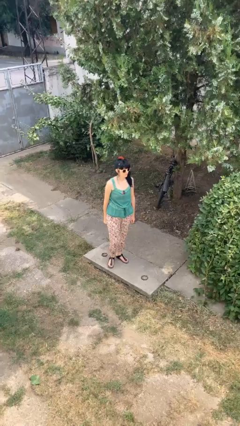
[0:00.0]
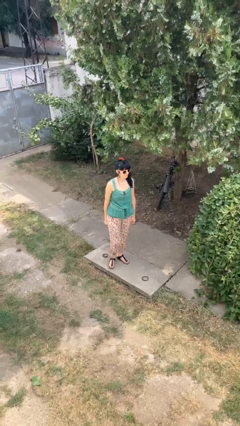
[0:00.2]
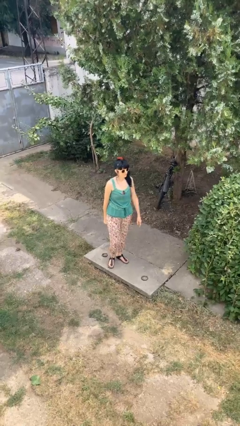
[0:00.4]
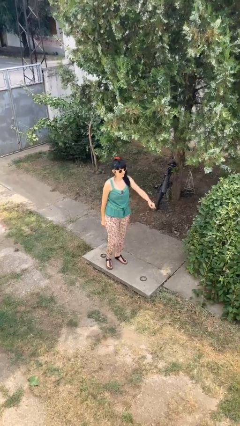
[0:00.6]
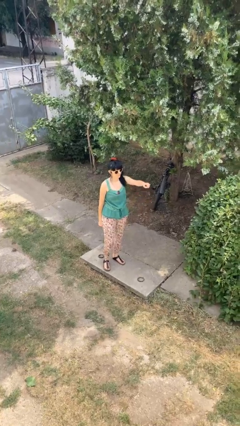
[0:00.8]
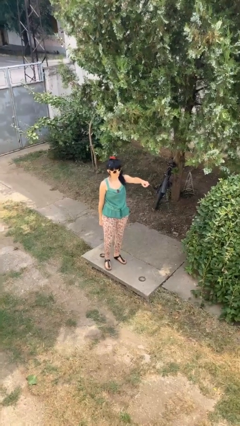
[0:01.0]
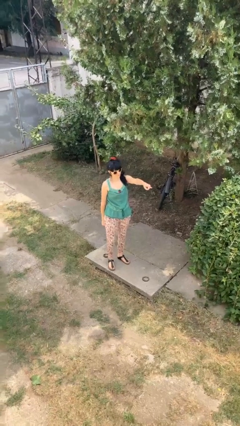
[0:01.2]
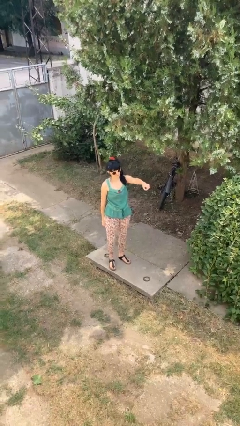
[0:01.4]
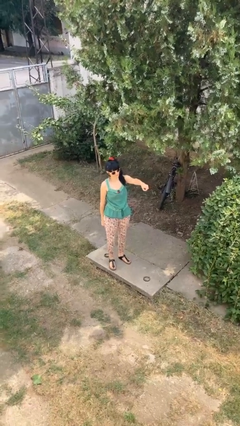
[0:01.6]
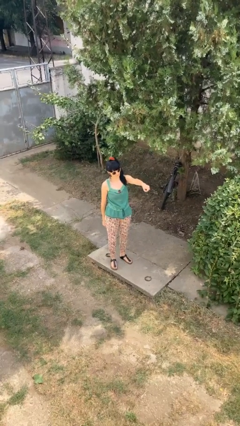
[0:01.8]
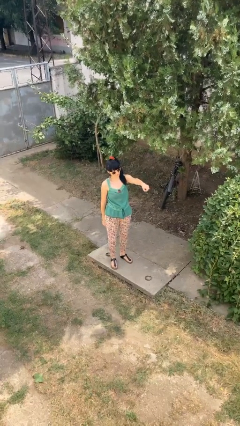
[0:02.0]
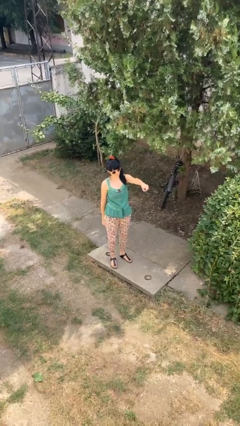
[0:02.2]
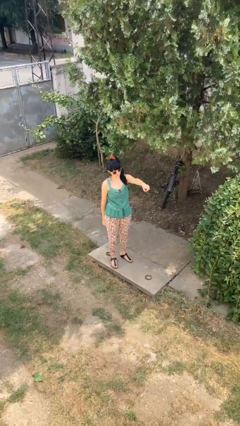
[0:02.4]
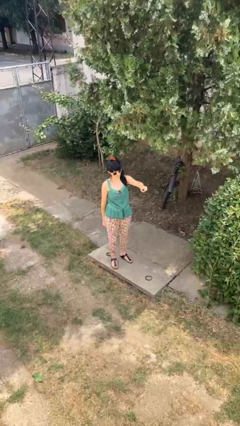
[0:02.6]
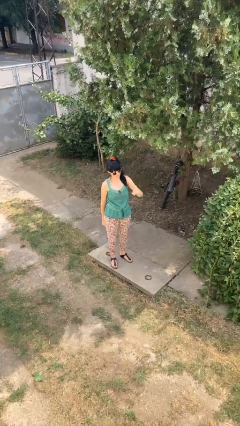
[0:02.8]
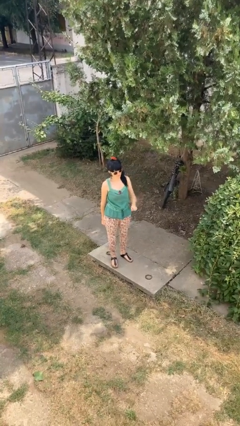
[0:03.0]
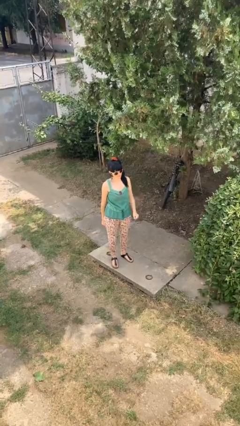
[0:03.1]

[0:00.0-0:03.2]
person points at person

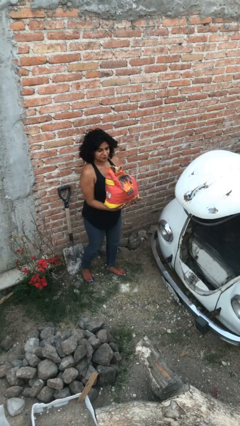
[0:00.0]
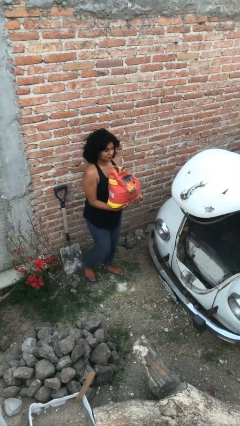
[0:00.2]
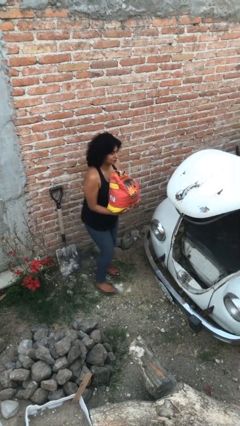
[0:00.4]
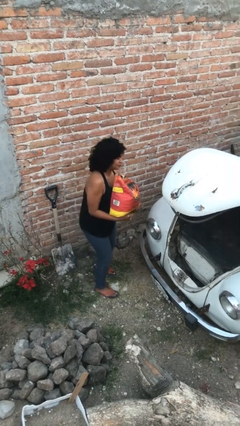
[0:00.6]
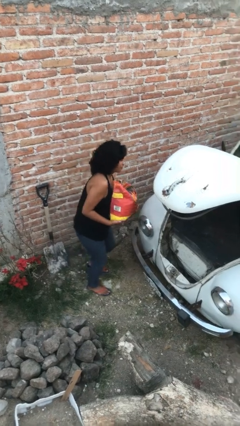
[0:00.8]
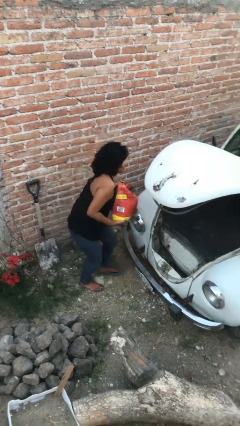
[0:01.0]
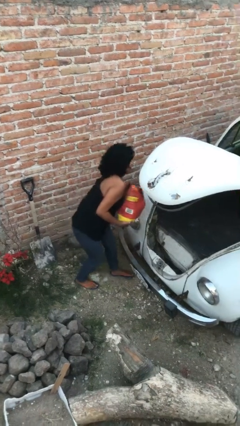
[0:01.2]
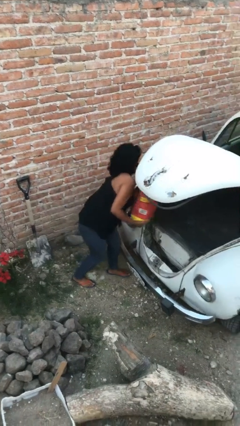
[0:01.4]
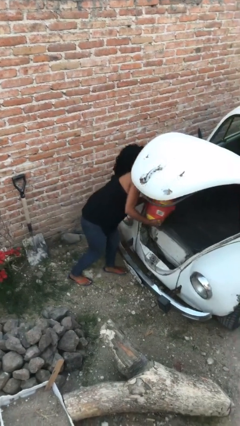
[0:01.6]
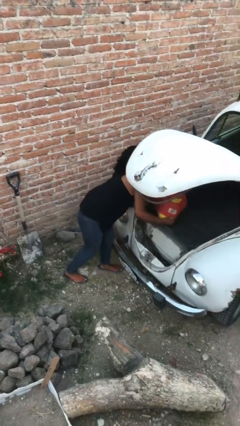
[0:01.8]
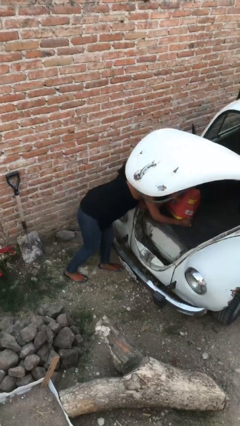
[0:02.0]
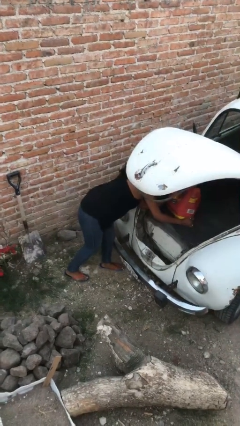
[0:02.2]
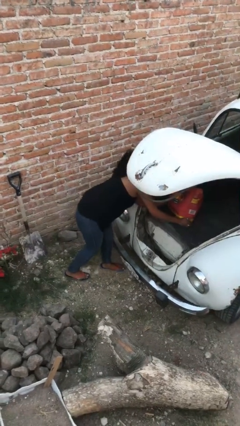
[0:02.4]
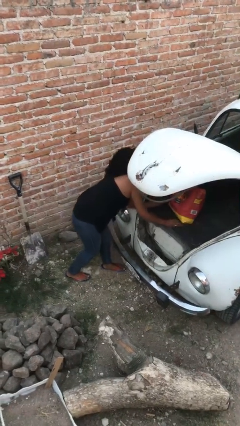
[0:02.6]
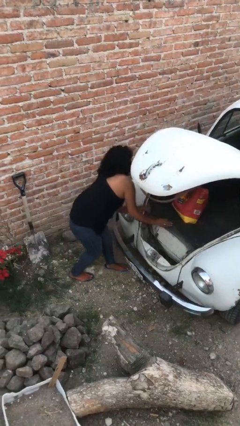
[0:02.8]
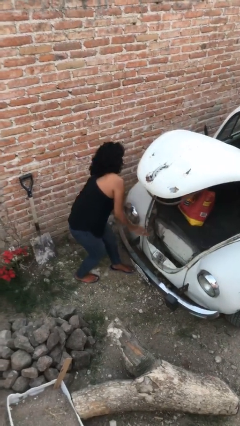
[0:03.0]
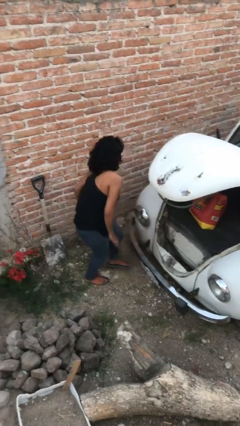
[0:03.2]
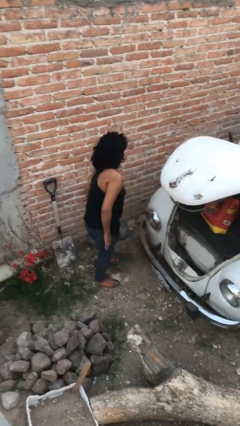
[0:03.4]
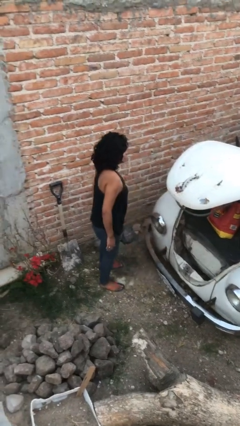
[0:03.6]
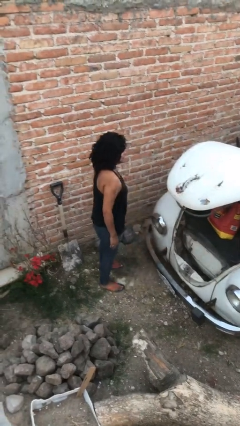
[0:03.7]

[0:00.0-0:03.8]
person loads car

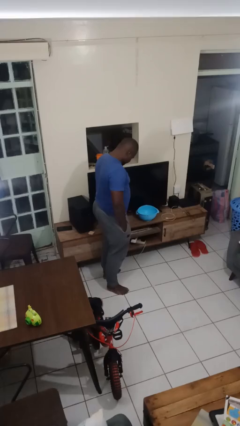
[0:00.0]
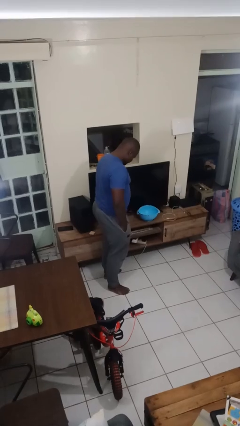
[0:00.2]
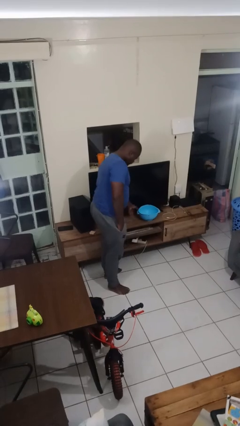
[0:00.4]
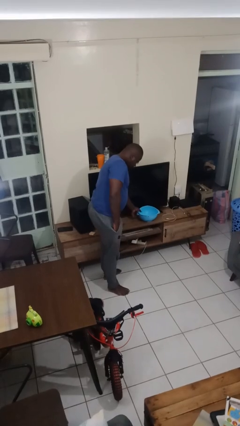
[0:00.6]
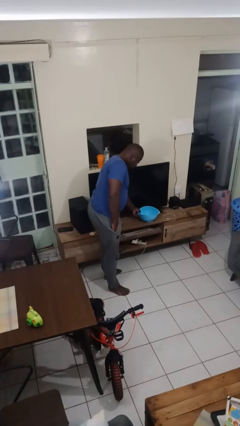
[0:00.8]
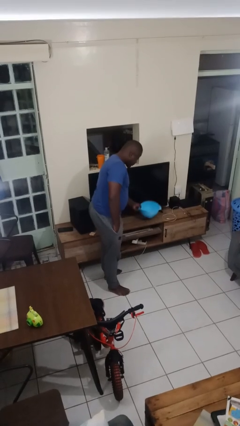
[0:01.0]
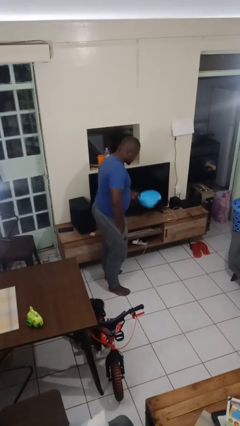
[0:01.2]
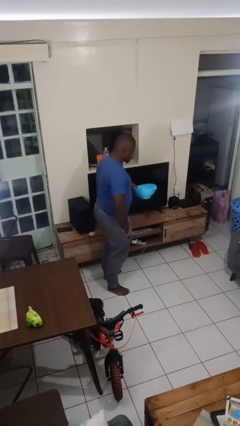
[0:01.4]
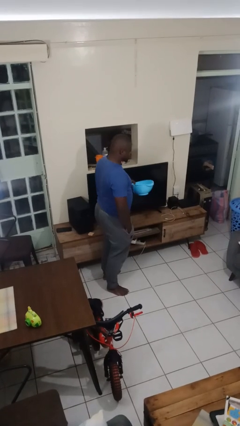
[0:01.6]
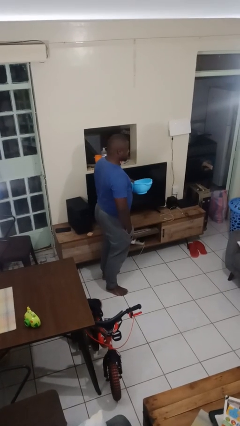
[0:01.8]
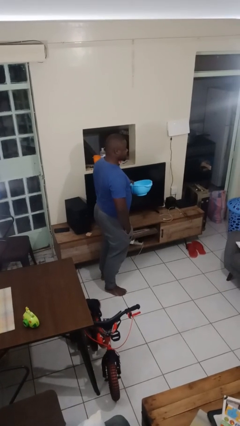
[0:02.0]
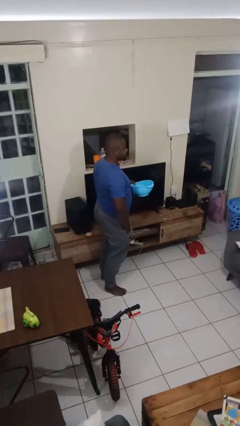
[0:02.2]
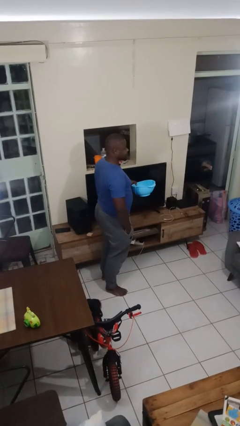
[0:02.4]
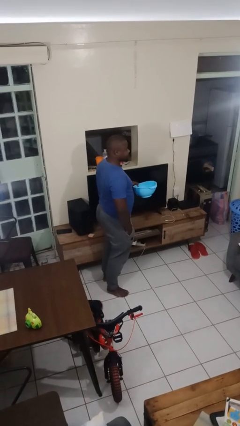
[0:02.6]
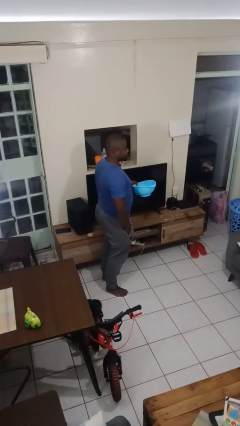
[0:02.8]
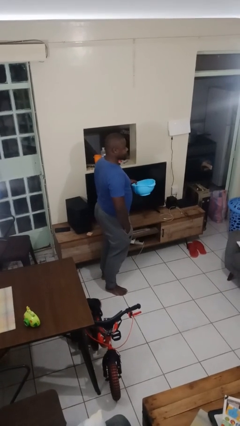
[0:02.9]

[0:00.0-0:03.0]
person picks up object from countertop

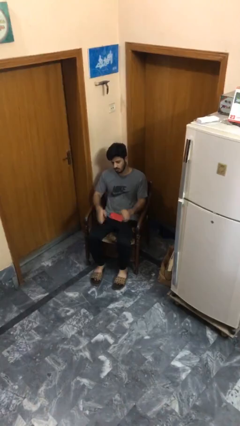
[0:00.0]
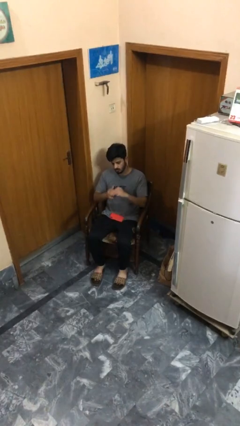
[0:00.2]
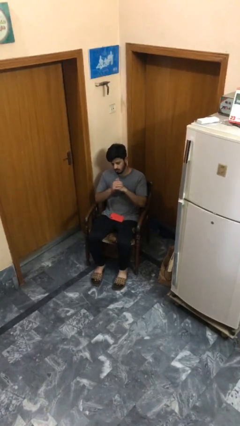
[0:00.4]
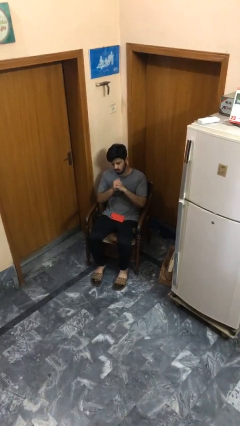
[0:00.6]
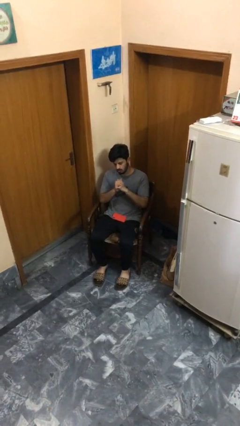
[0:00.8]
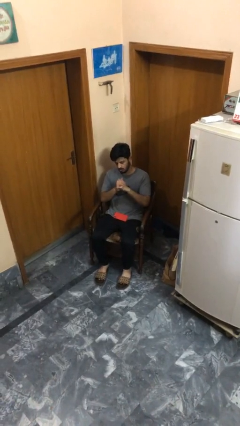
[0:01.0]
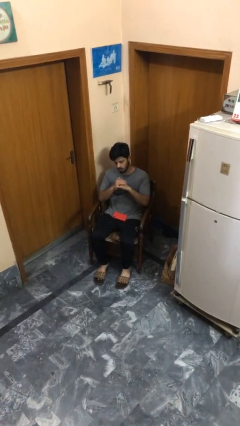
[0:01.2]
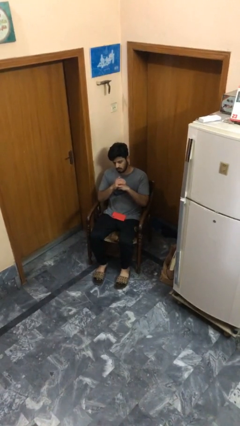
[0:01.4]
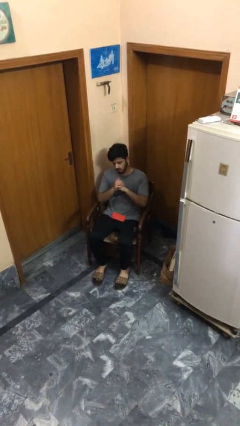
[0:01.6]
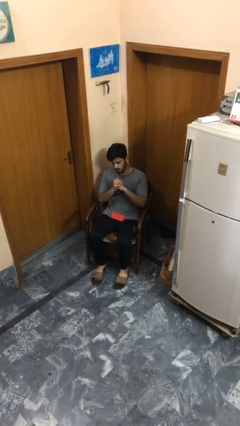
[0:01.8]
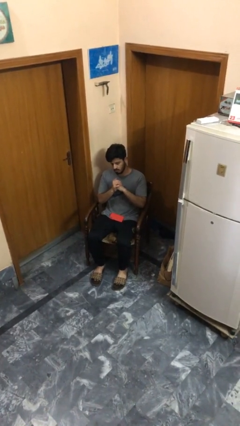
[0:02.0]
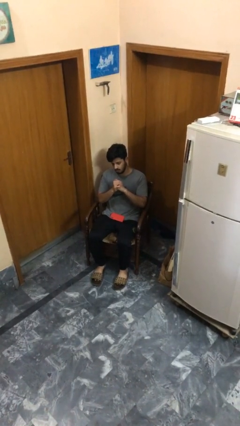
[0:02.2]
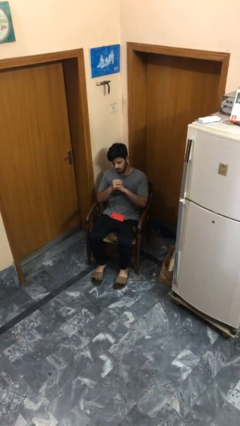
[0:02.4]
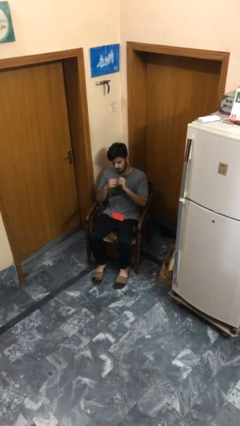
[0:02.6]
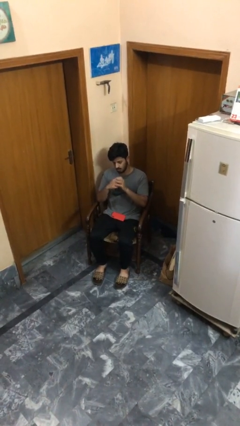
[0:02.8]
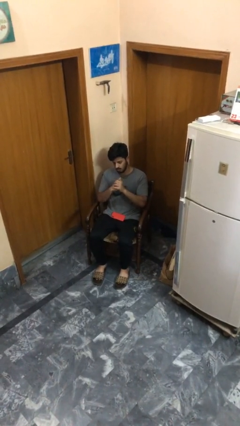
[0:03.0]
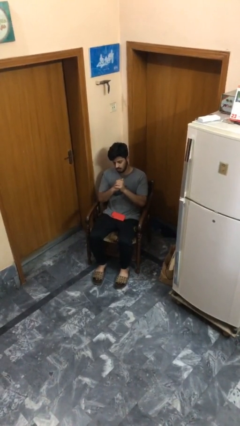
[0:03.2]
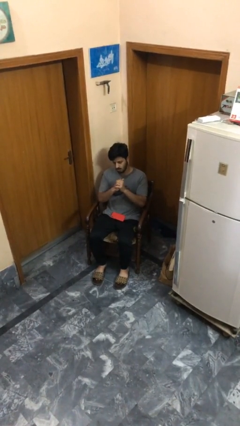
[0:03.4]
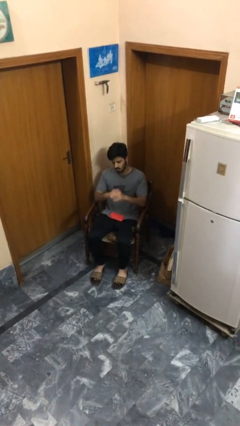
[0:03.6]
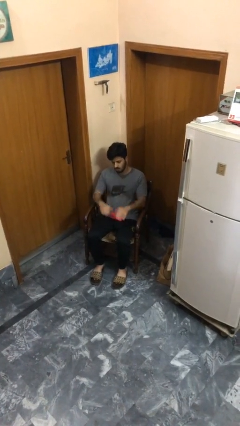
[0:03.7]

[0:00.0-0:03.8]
person cracks knuckles

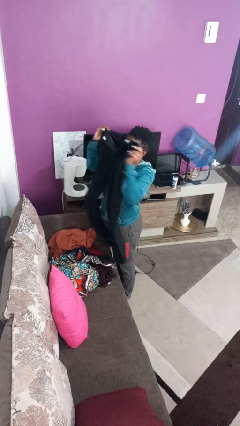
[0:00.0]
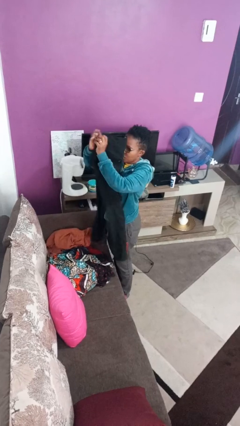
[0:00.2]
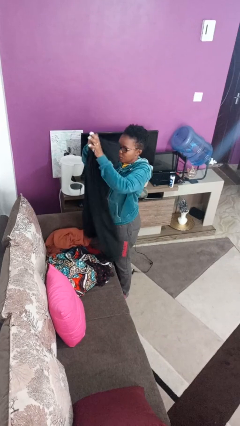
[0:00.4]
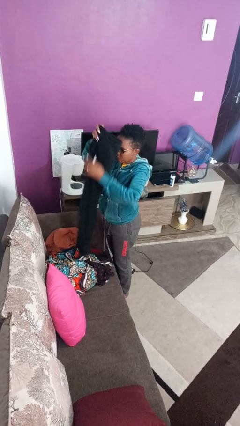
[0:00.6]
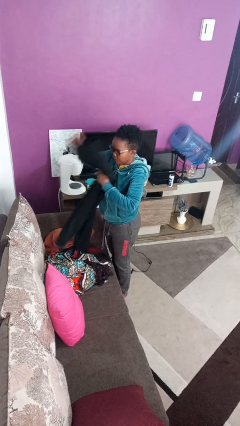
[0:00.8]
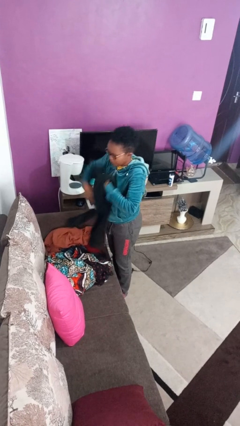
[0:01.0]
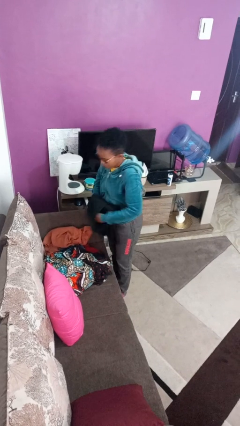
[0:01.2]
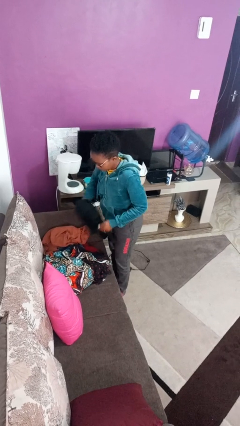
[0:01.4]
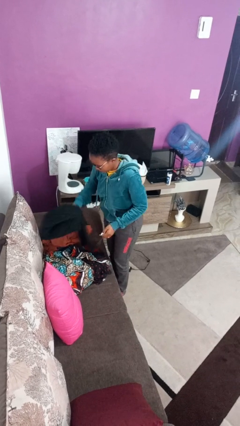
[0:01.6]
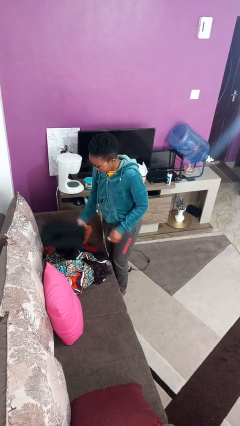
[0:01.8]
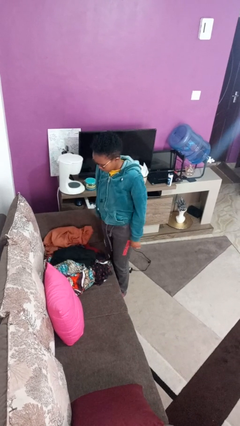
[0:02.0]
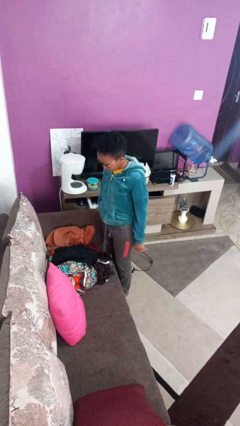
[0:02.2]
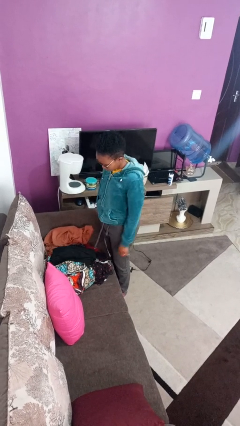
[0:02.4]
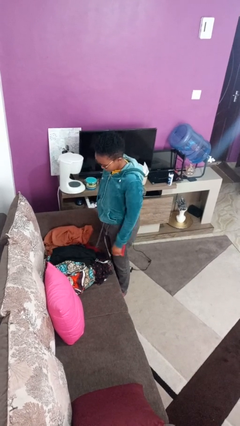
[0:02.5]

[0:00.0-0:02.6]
person folds pants

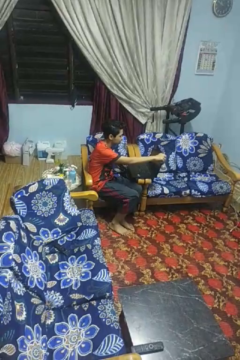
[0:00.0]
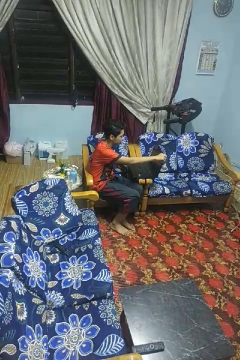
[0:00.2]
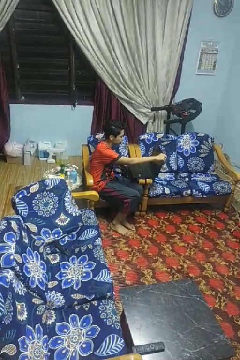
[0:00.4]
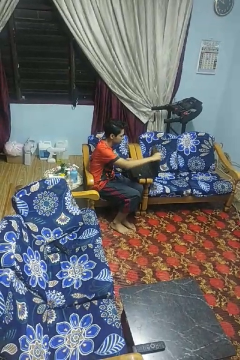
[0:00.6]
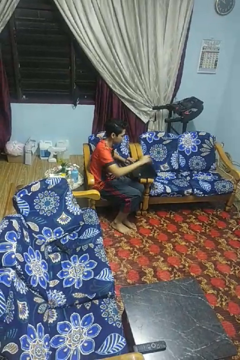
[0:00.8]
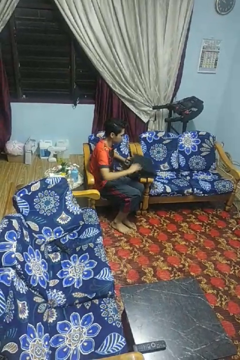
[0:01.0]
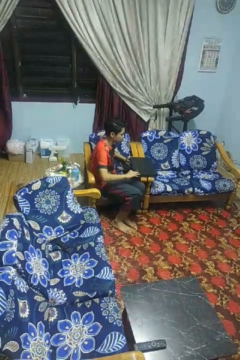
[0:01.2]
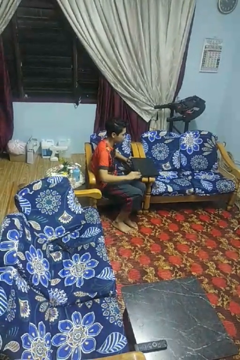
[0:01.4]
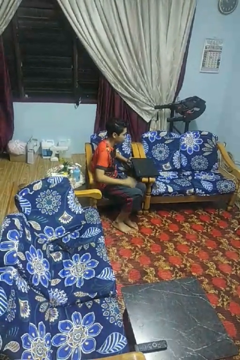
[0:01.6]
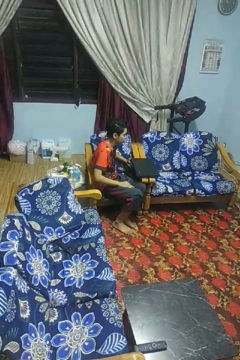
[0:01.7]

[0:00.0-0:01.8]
person closes laptop
